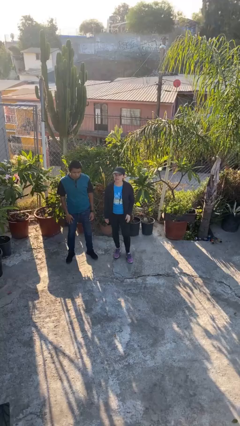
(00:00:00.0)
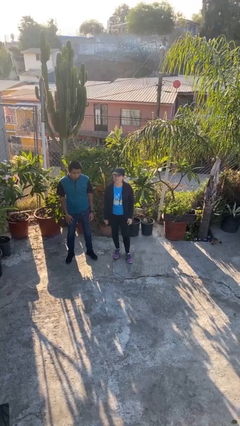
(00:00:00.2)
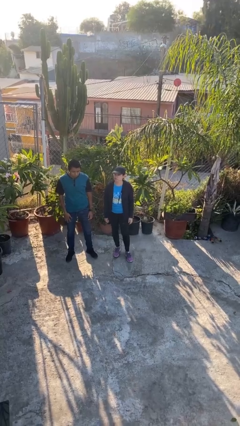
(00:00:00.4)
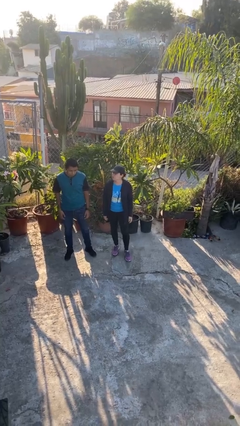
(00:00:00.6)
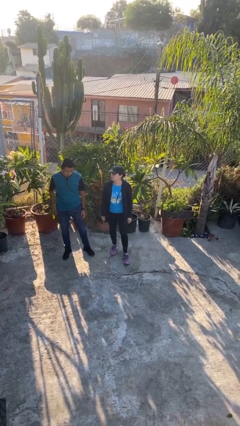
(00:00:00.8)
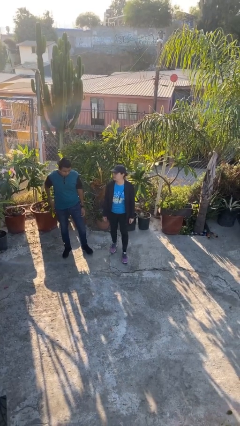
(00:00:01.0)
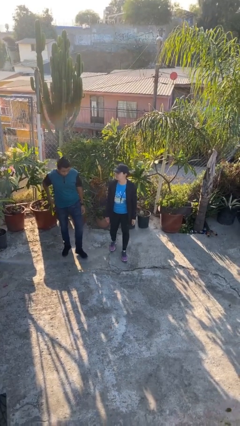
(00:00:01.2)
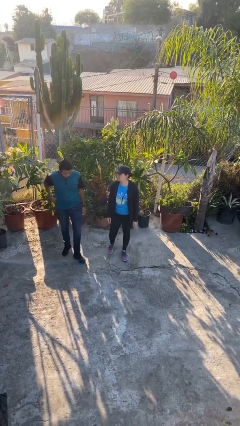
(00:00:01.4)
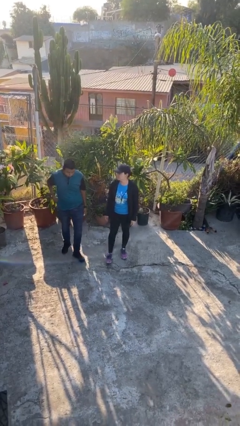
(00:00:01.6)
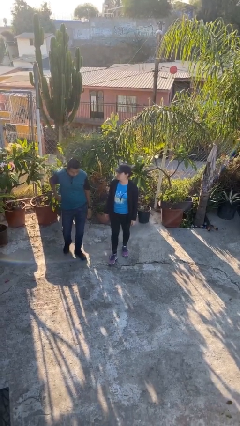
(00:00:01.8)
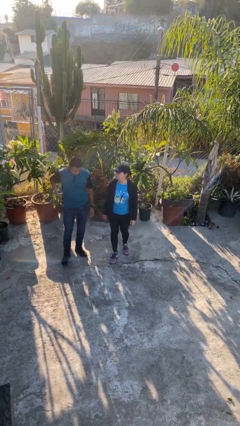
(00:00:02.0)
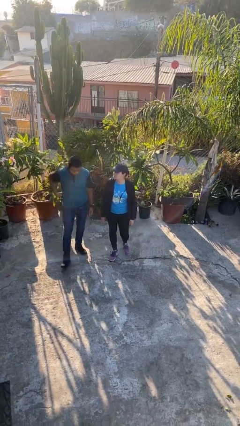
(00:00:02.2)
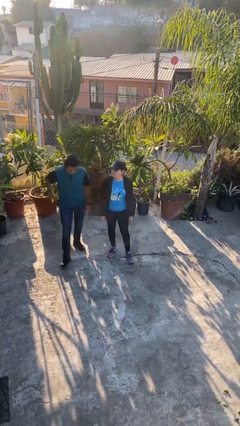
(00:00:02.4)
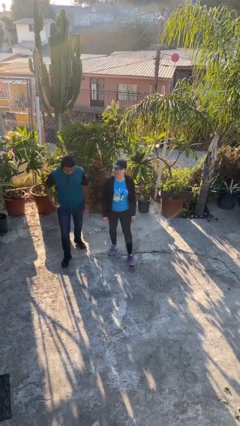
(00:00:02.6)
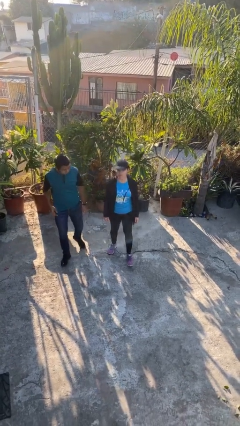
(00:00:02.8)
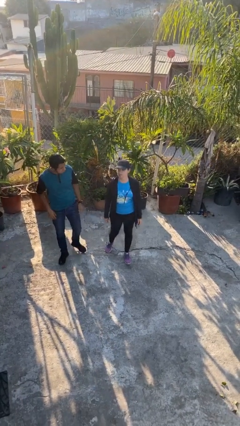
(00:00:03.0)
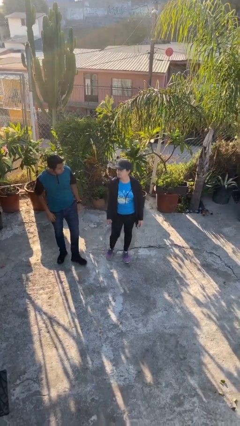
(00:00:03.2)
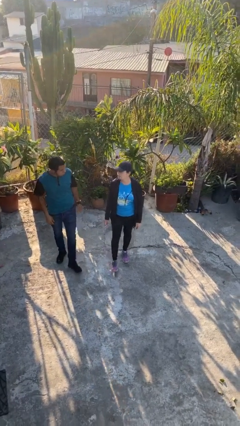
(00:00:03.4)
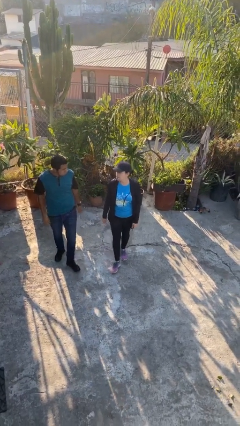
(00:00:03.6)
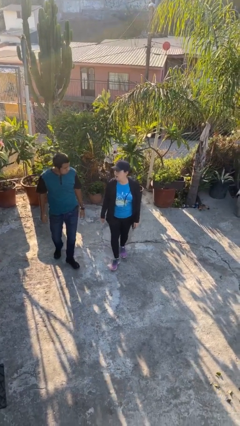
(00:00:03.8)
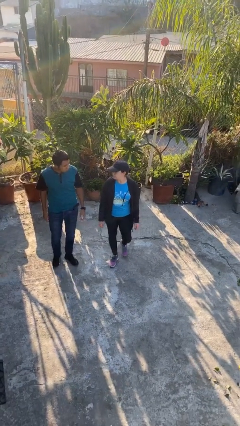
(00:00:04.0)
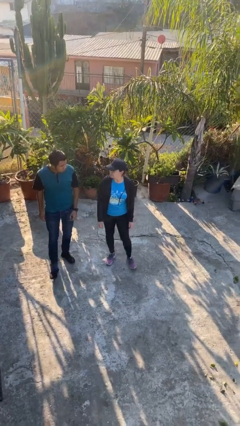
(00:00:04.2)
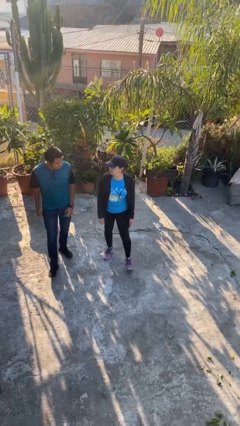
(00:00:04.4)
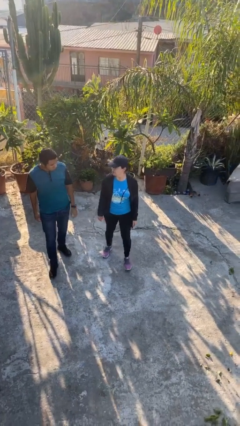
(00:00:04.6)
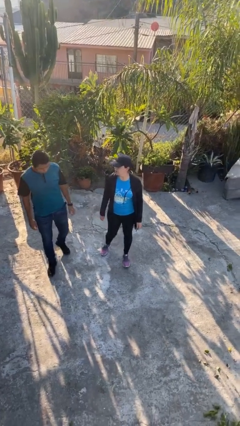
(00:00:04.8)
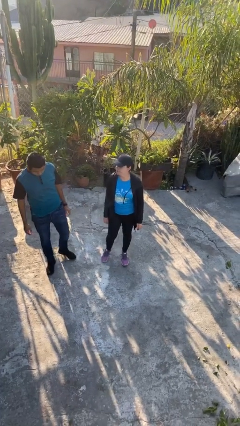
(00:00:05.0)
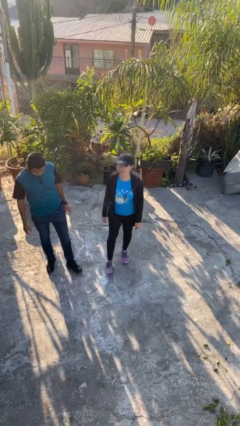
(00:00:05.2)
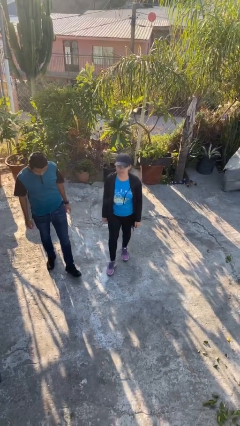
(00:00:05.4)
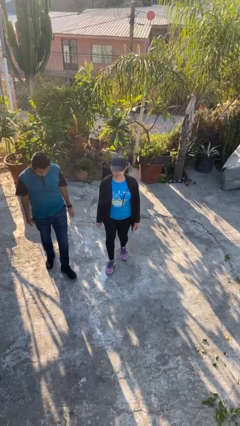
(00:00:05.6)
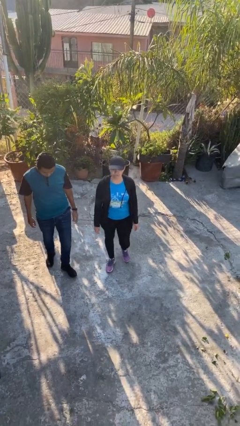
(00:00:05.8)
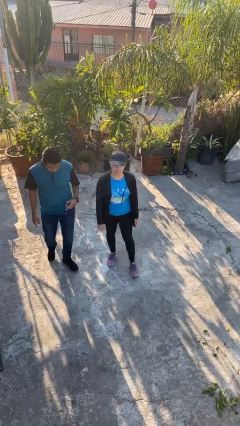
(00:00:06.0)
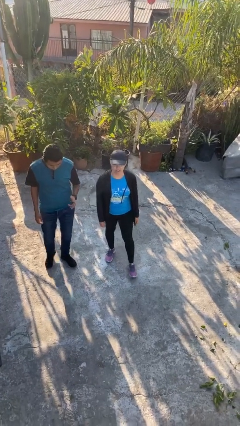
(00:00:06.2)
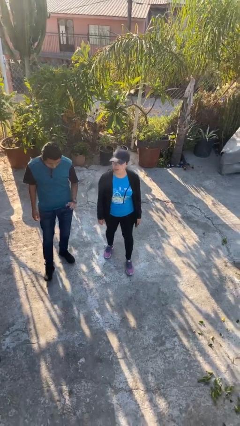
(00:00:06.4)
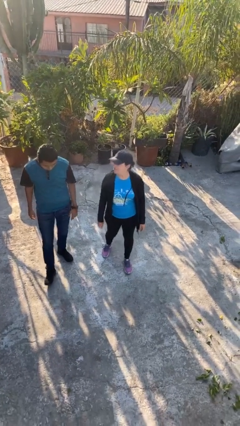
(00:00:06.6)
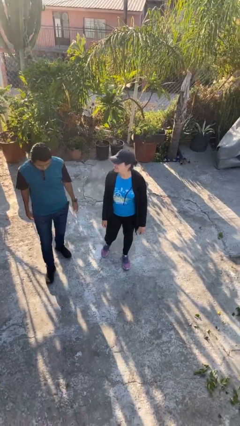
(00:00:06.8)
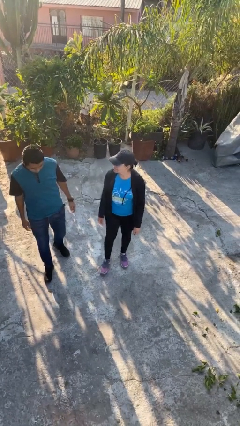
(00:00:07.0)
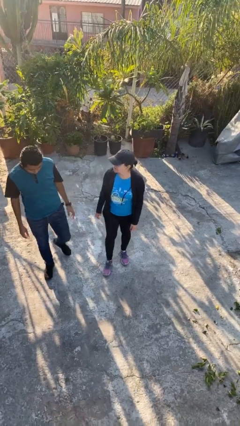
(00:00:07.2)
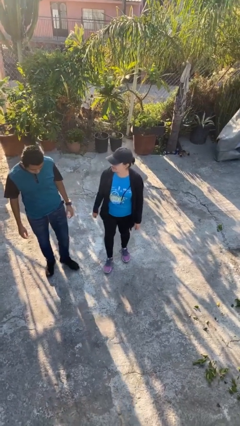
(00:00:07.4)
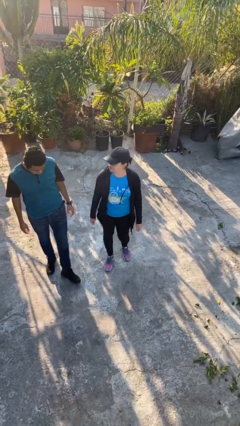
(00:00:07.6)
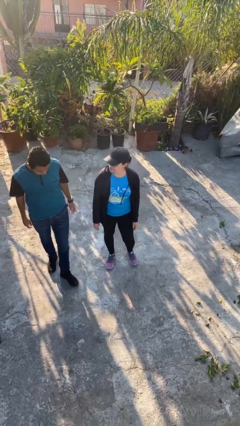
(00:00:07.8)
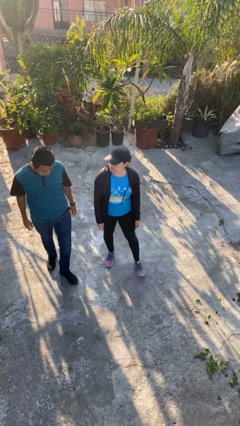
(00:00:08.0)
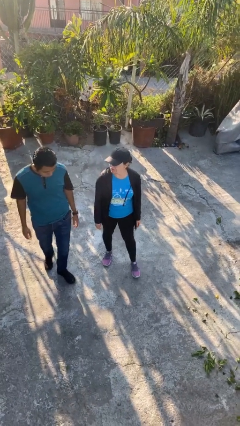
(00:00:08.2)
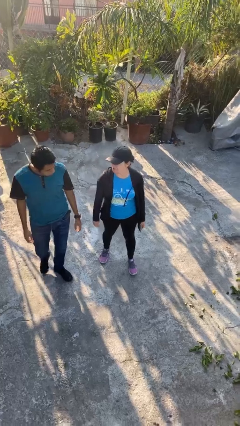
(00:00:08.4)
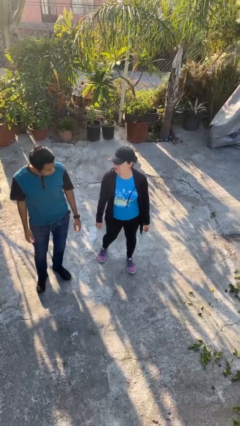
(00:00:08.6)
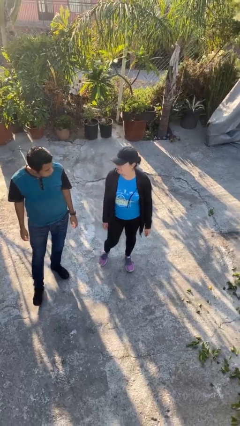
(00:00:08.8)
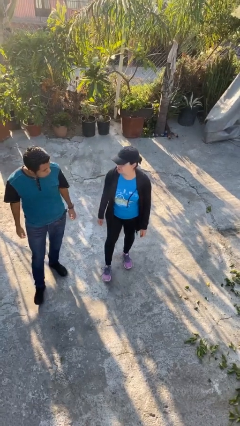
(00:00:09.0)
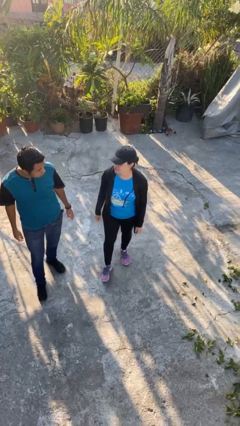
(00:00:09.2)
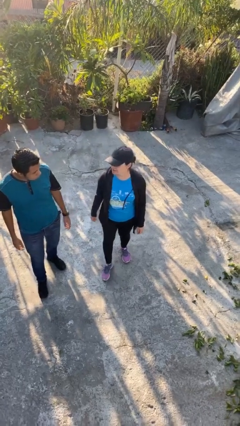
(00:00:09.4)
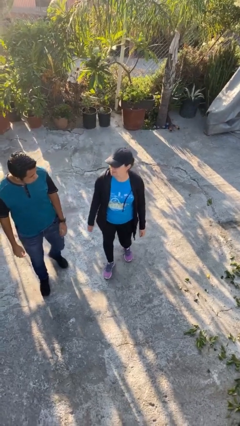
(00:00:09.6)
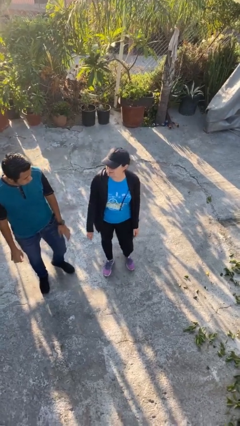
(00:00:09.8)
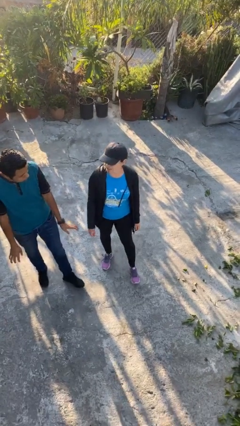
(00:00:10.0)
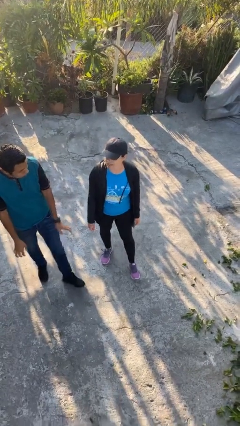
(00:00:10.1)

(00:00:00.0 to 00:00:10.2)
person talks to person

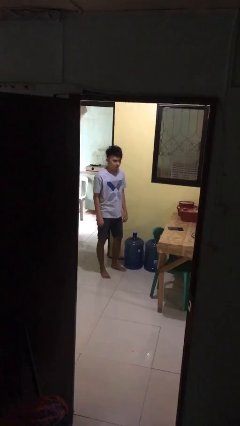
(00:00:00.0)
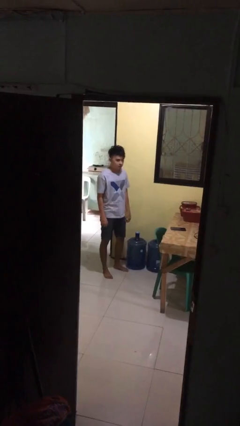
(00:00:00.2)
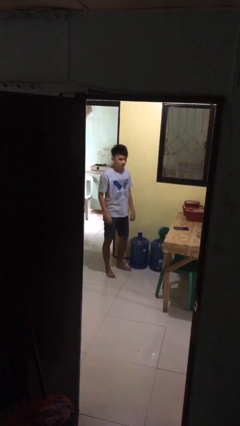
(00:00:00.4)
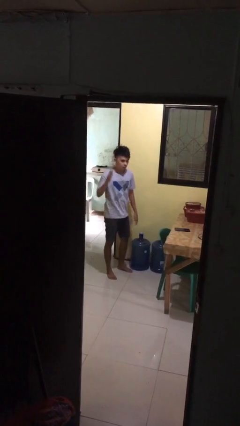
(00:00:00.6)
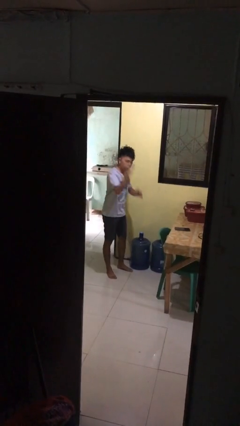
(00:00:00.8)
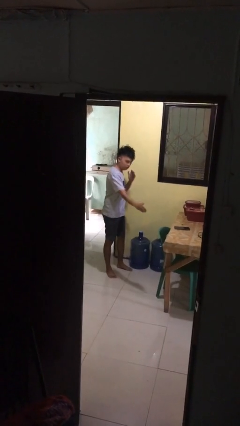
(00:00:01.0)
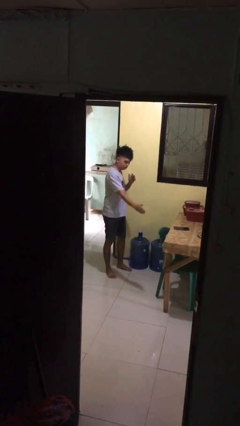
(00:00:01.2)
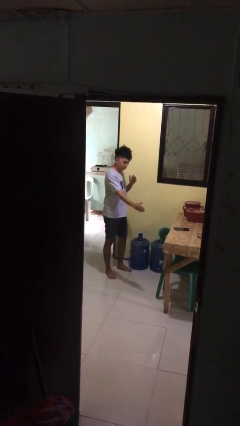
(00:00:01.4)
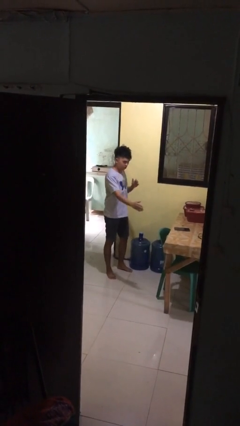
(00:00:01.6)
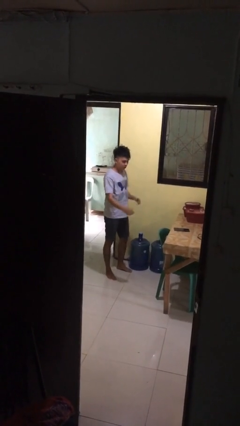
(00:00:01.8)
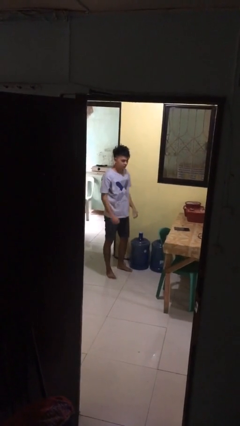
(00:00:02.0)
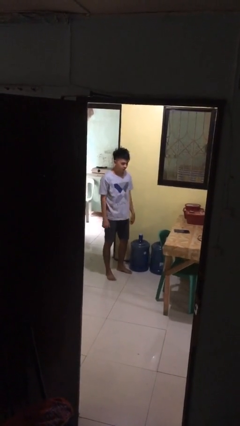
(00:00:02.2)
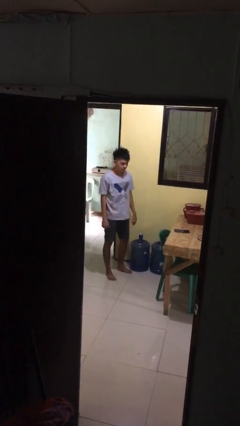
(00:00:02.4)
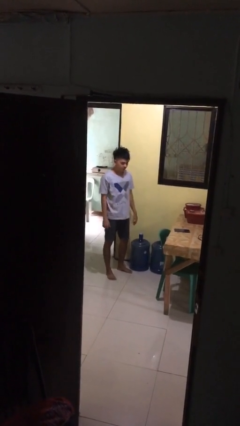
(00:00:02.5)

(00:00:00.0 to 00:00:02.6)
person karate chop

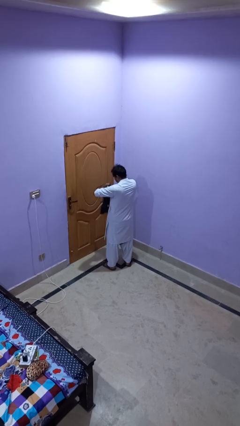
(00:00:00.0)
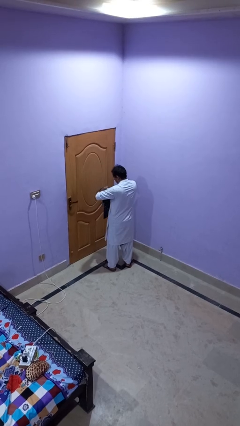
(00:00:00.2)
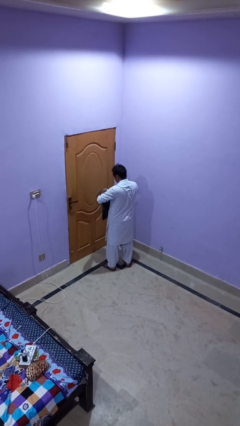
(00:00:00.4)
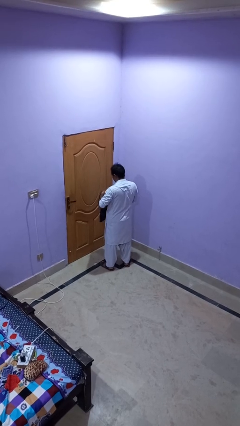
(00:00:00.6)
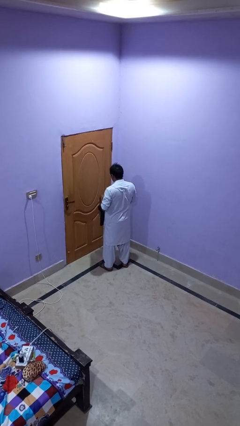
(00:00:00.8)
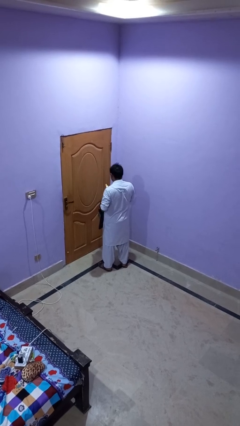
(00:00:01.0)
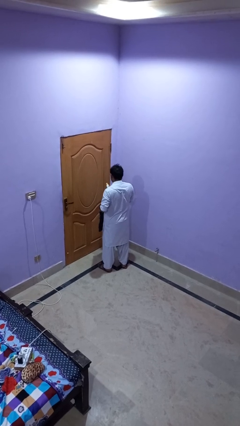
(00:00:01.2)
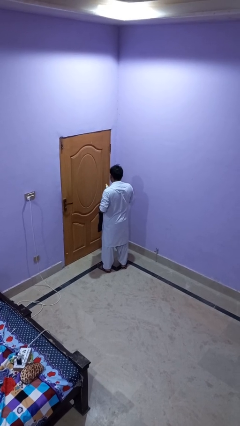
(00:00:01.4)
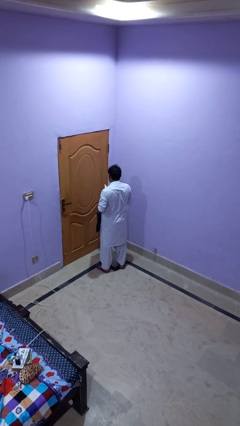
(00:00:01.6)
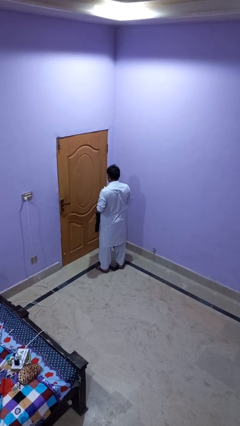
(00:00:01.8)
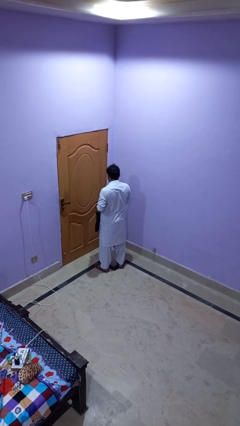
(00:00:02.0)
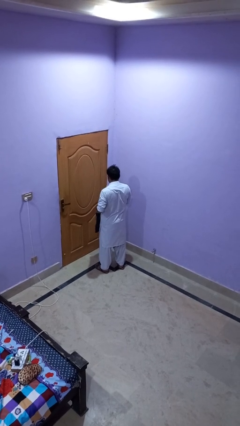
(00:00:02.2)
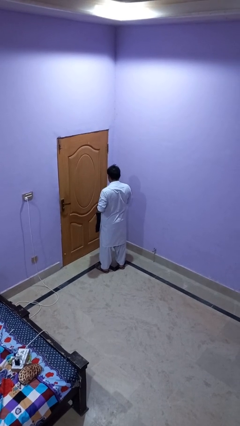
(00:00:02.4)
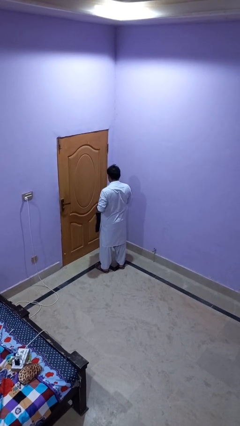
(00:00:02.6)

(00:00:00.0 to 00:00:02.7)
person takes object from purse

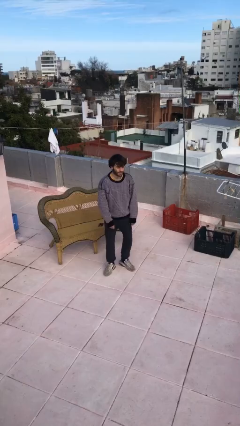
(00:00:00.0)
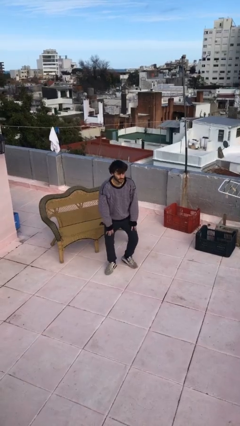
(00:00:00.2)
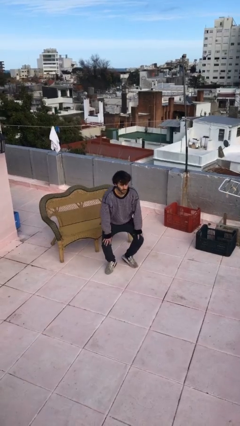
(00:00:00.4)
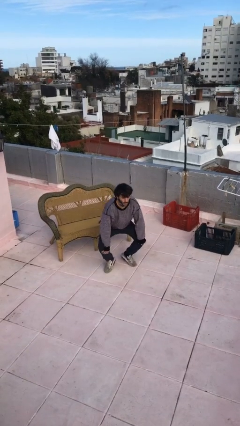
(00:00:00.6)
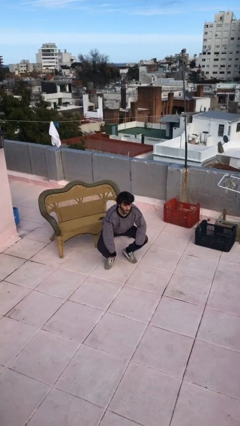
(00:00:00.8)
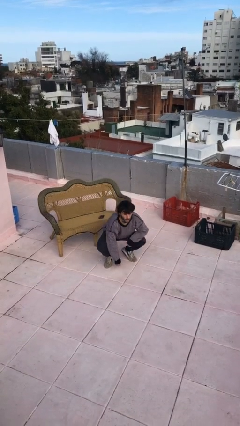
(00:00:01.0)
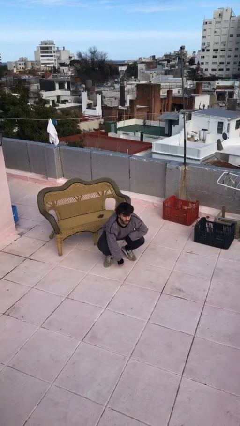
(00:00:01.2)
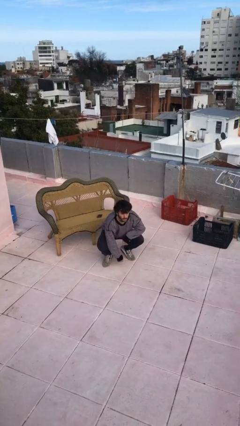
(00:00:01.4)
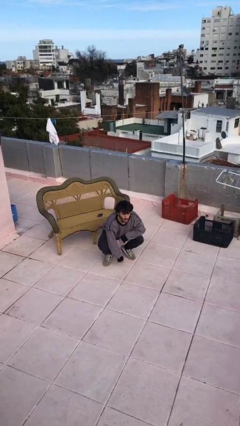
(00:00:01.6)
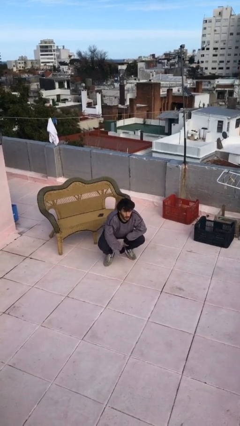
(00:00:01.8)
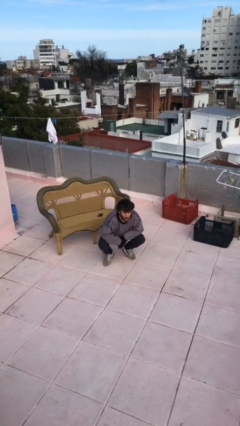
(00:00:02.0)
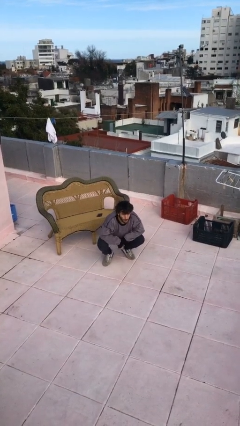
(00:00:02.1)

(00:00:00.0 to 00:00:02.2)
person squats

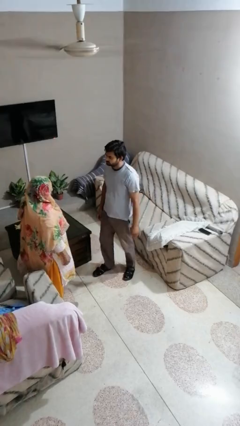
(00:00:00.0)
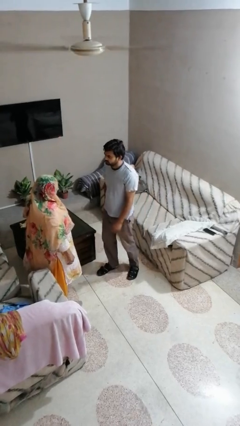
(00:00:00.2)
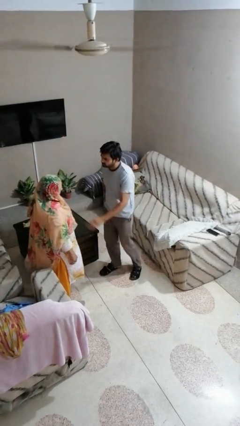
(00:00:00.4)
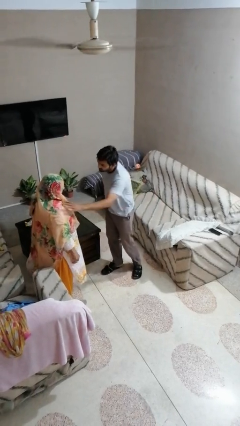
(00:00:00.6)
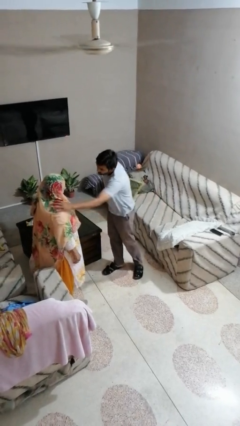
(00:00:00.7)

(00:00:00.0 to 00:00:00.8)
person shoves person